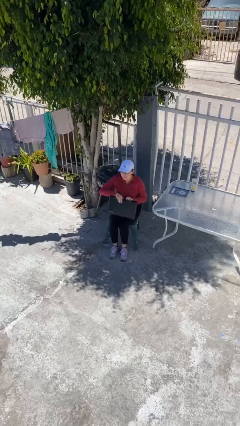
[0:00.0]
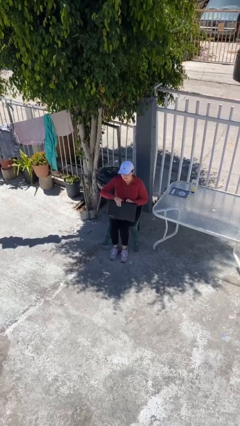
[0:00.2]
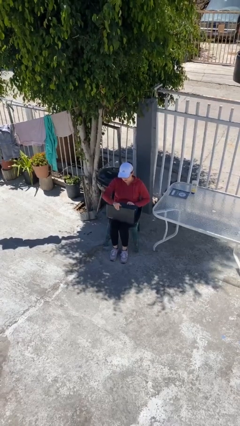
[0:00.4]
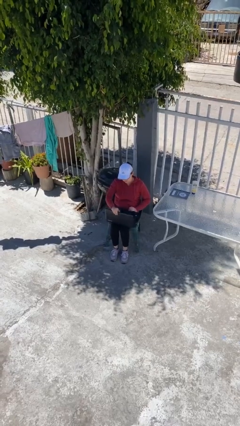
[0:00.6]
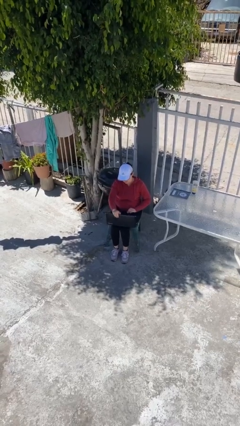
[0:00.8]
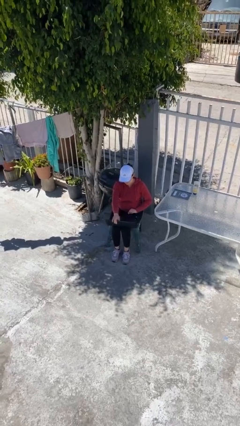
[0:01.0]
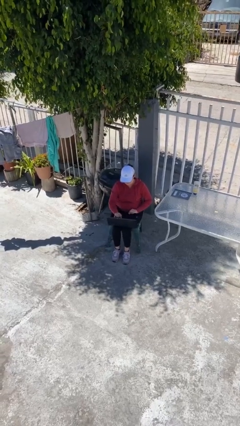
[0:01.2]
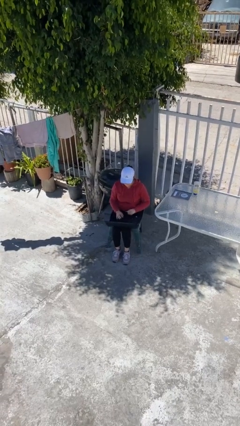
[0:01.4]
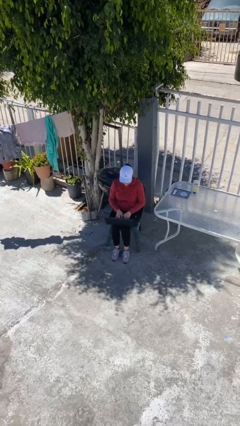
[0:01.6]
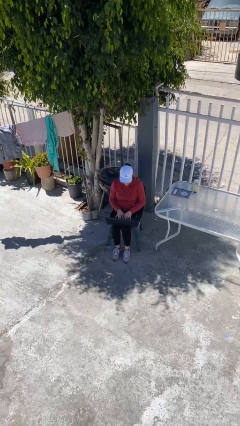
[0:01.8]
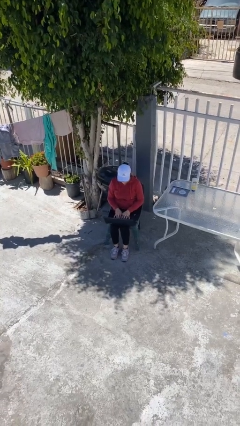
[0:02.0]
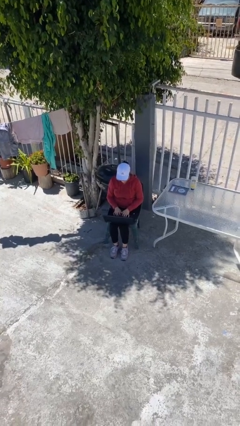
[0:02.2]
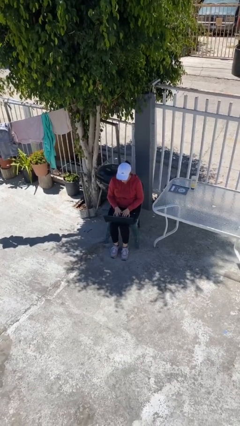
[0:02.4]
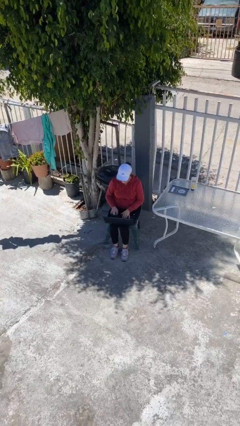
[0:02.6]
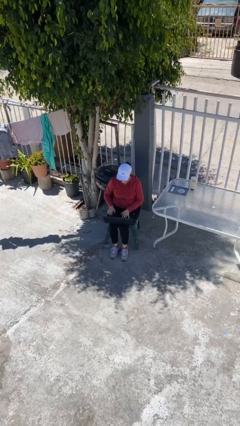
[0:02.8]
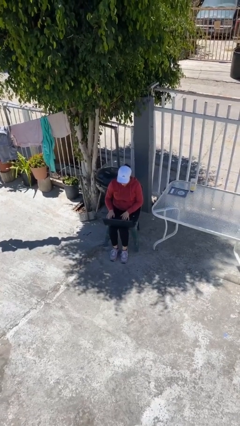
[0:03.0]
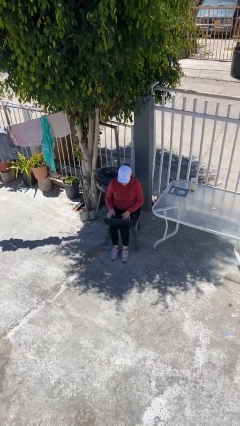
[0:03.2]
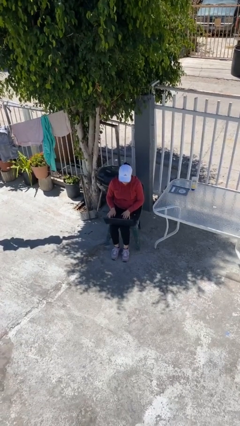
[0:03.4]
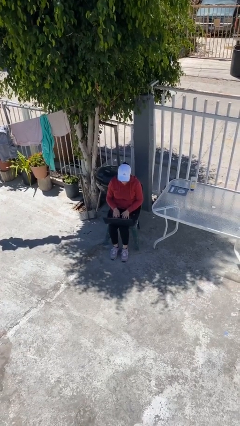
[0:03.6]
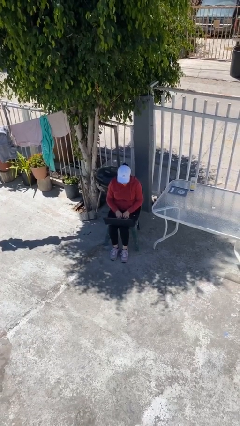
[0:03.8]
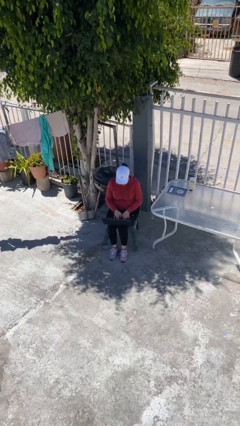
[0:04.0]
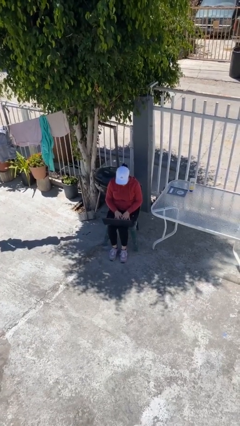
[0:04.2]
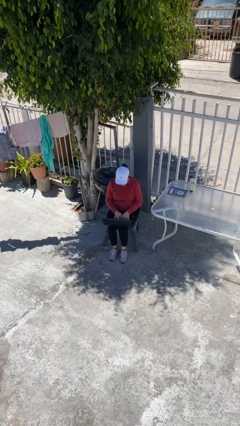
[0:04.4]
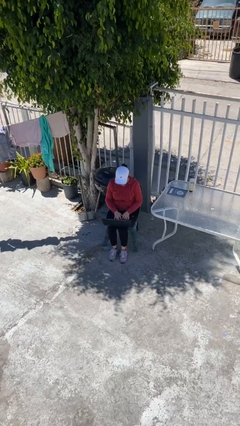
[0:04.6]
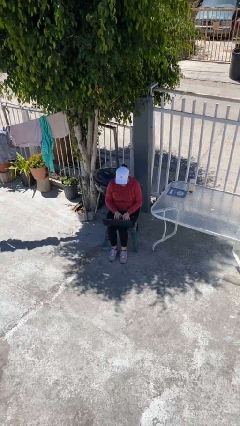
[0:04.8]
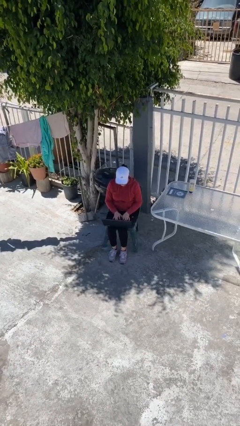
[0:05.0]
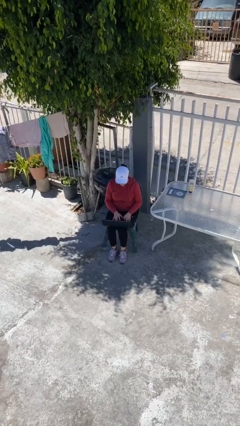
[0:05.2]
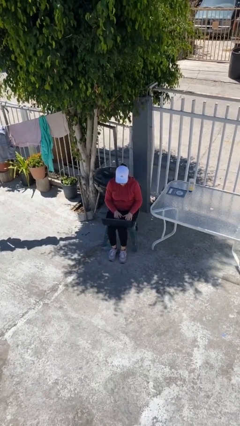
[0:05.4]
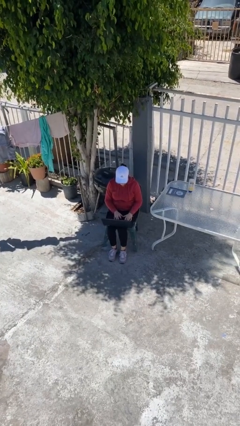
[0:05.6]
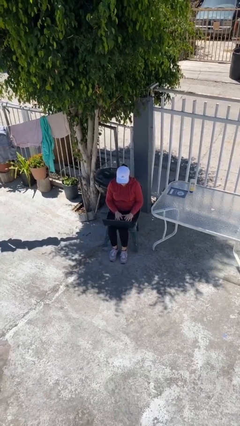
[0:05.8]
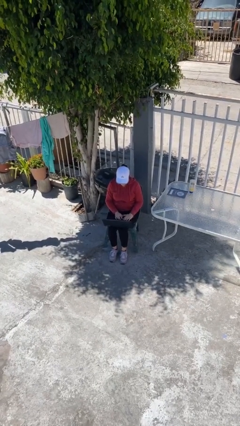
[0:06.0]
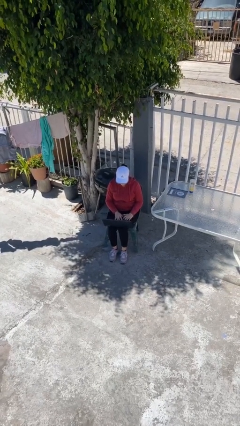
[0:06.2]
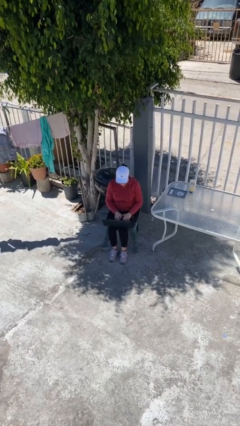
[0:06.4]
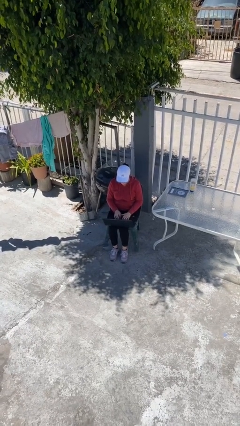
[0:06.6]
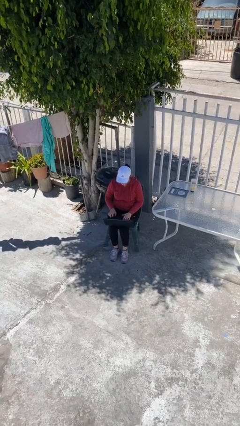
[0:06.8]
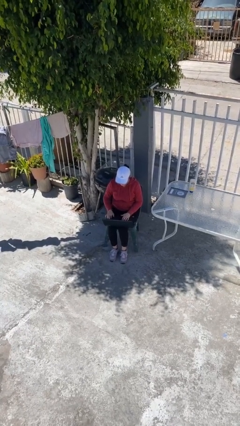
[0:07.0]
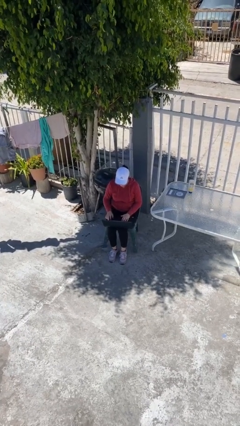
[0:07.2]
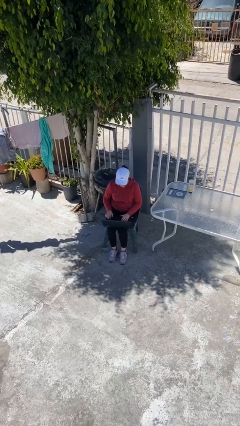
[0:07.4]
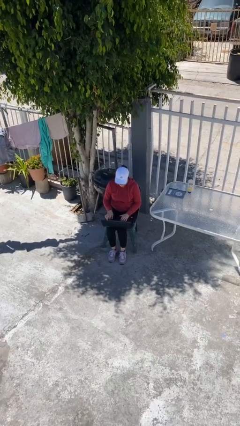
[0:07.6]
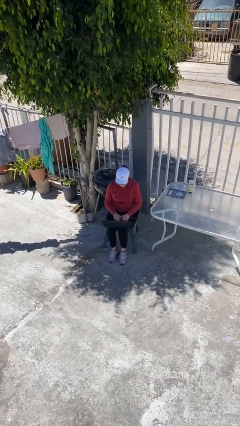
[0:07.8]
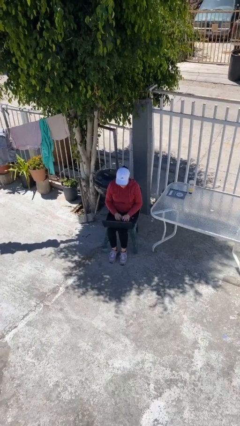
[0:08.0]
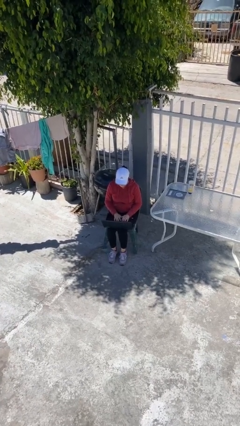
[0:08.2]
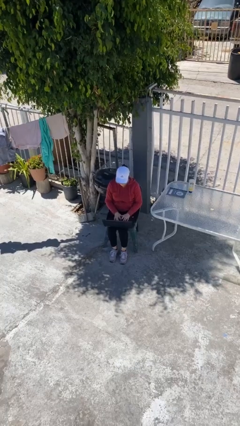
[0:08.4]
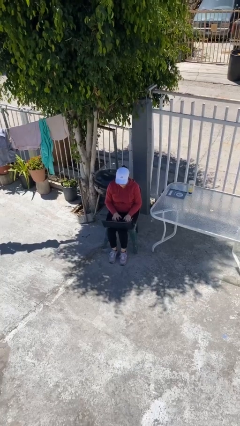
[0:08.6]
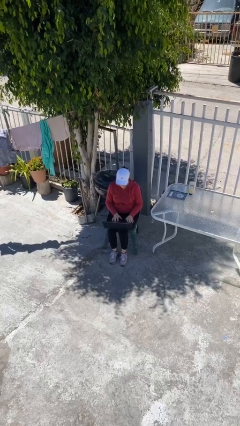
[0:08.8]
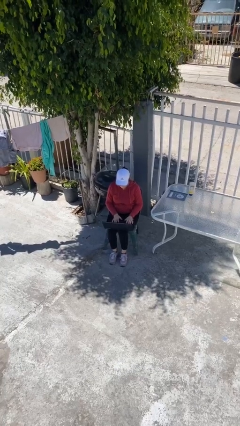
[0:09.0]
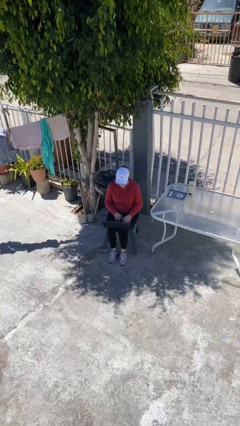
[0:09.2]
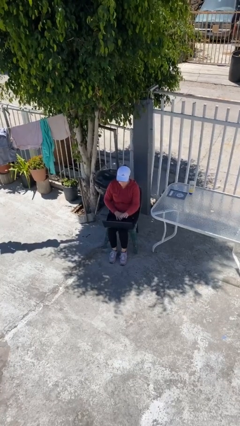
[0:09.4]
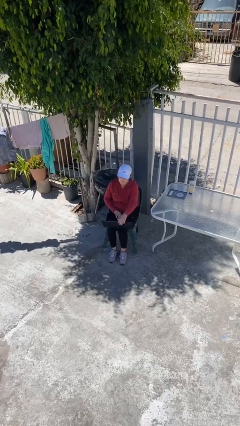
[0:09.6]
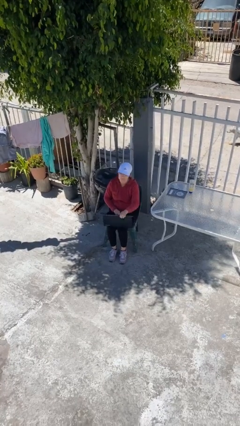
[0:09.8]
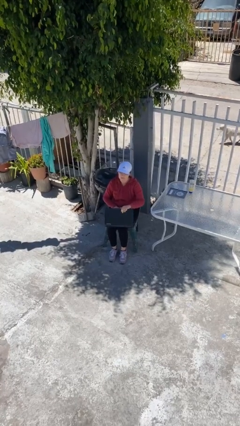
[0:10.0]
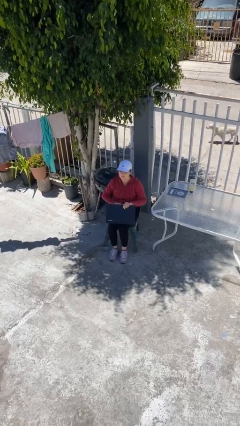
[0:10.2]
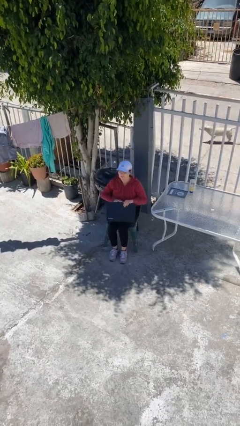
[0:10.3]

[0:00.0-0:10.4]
person interacts with laptop

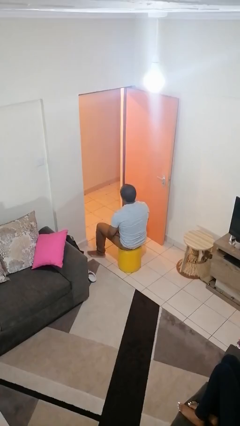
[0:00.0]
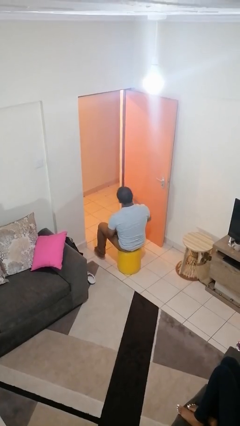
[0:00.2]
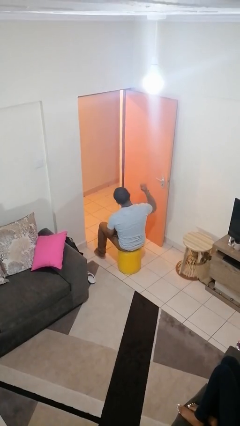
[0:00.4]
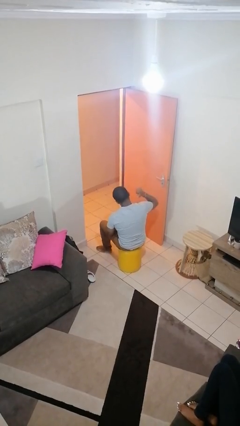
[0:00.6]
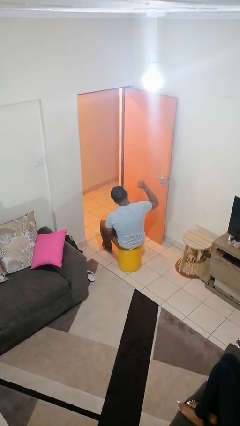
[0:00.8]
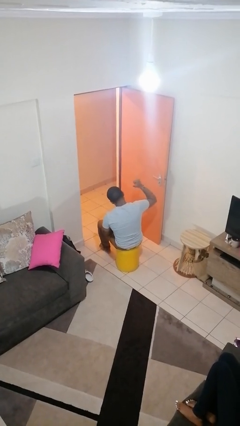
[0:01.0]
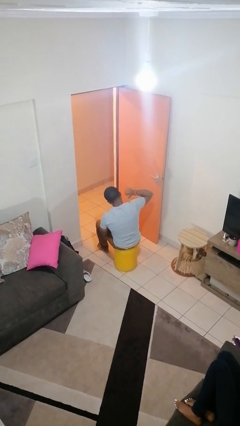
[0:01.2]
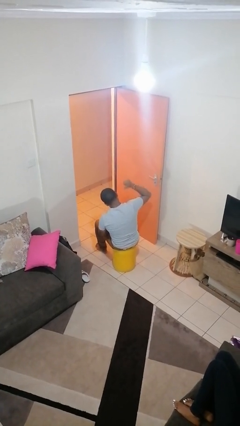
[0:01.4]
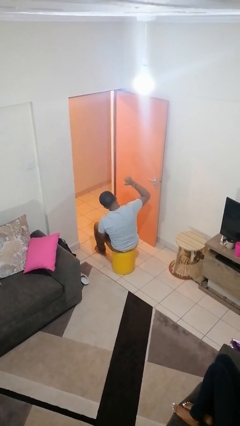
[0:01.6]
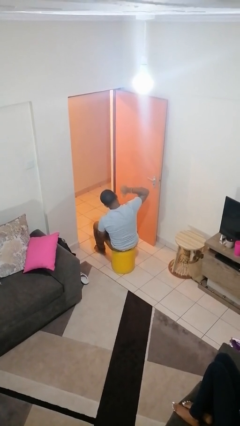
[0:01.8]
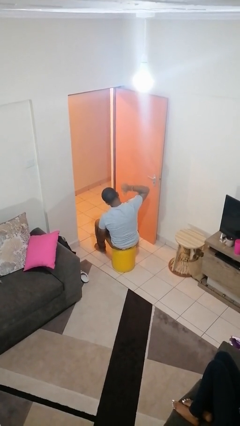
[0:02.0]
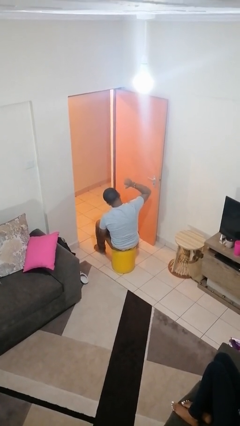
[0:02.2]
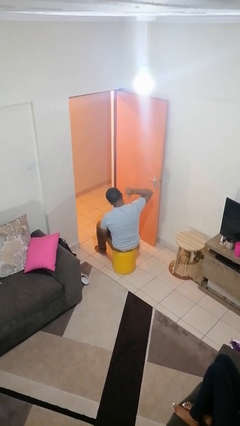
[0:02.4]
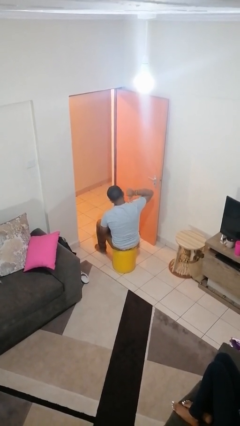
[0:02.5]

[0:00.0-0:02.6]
person gestures behind me

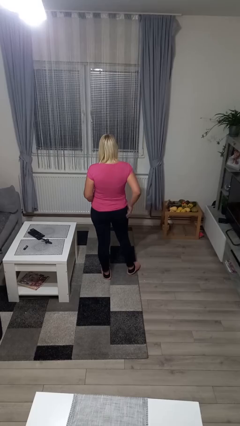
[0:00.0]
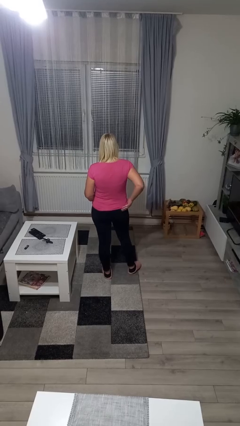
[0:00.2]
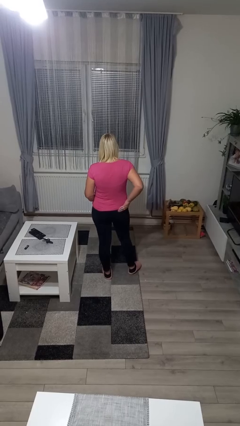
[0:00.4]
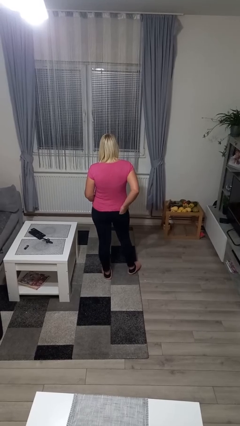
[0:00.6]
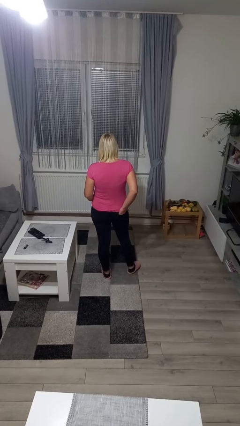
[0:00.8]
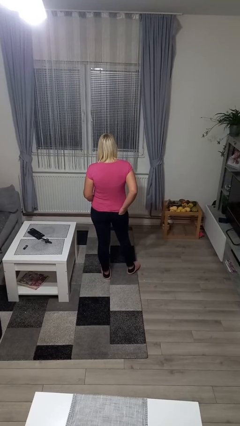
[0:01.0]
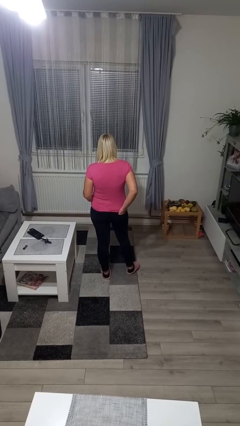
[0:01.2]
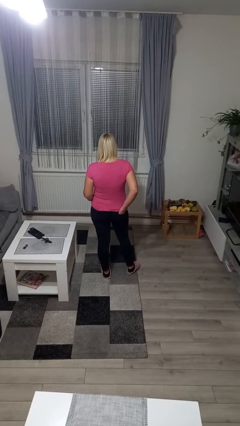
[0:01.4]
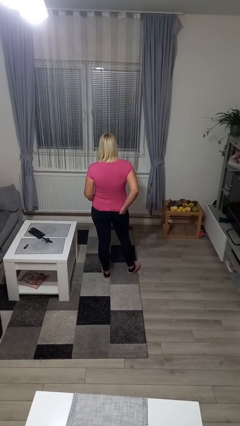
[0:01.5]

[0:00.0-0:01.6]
person puts hands in back pockets

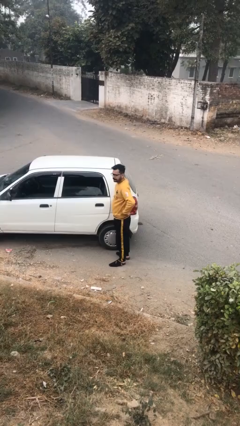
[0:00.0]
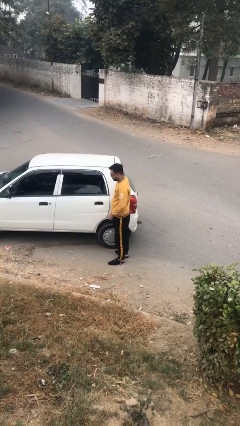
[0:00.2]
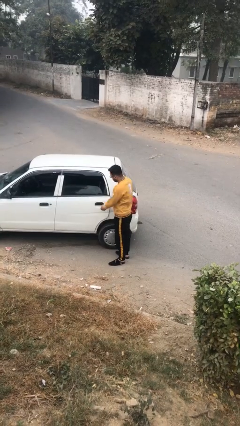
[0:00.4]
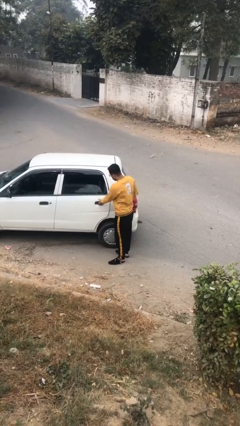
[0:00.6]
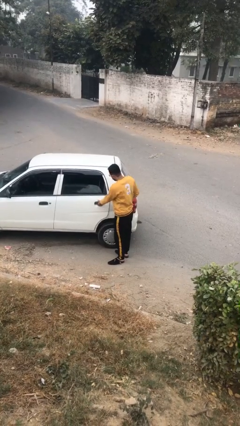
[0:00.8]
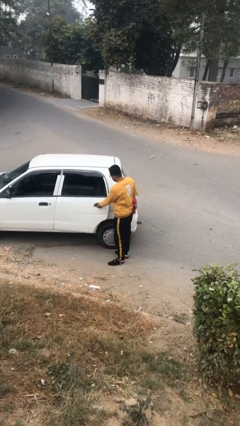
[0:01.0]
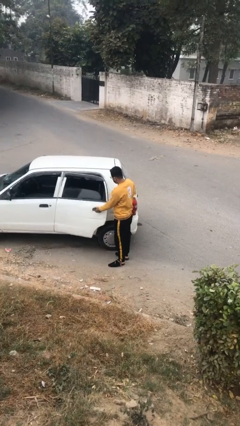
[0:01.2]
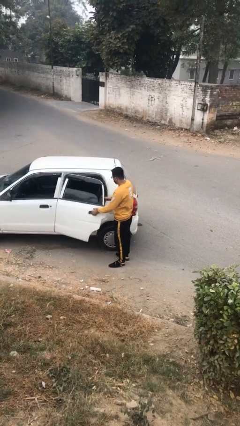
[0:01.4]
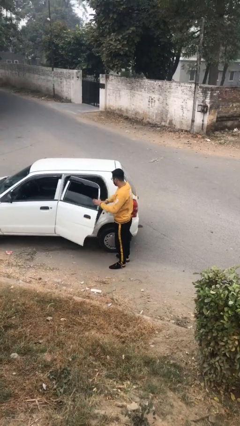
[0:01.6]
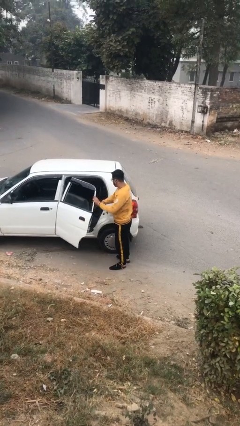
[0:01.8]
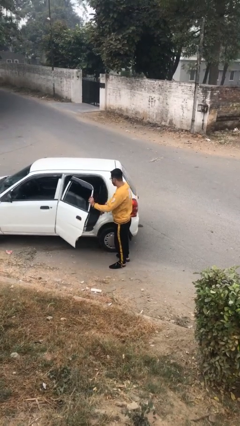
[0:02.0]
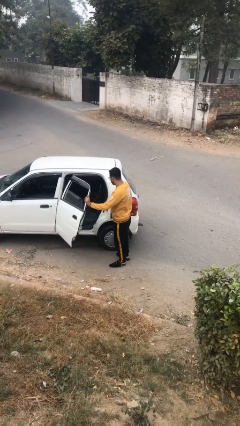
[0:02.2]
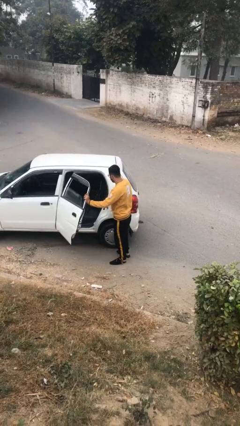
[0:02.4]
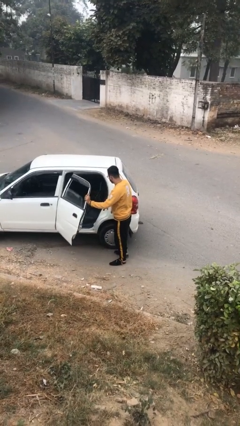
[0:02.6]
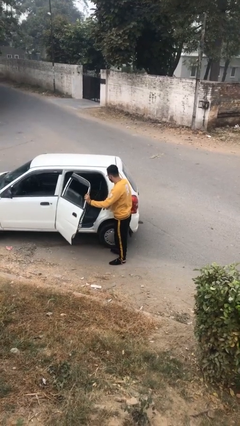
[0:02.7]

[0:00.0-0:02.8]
person opens car door

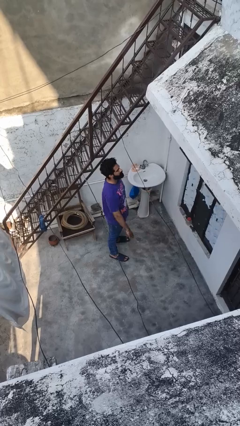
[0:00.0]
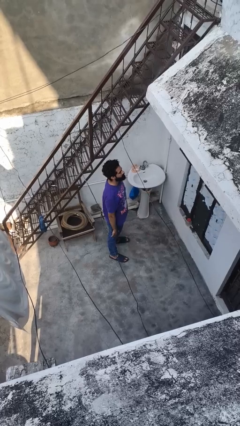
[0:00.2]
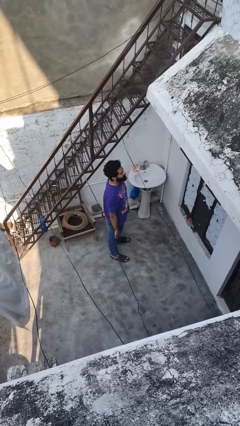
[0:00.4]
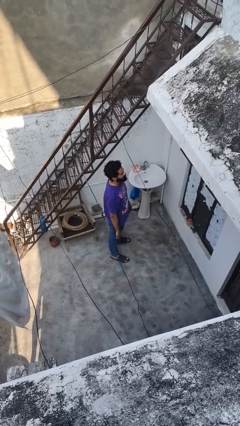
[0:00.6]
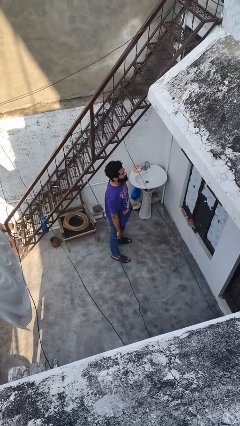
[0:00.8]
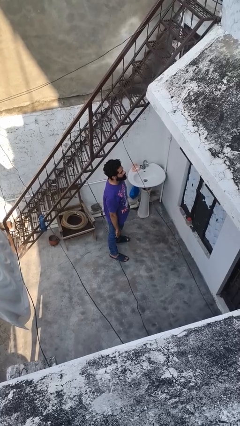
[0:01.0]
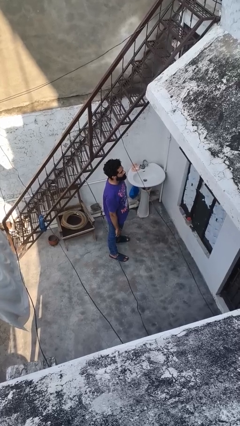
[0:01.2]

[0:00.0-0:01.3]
person gestures lower hand
